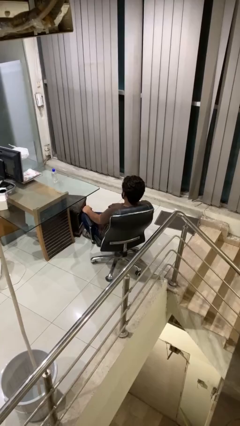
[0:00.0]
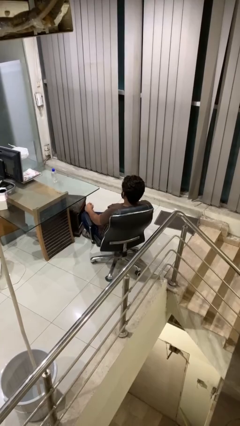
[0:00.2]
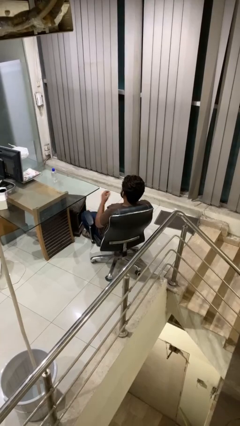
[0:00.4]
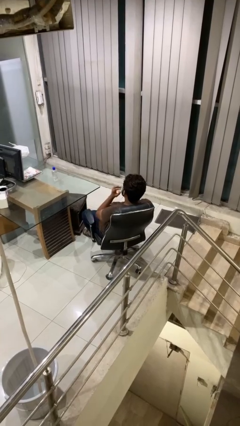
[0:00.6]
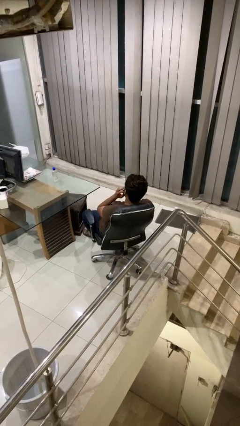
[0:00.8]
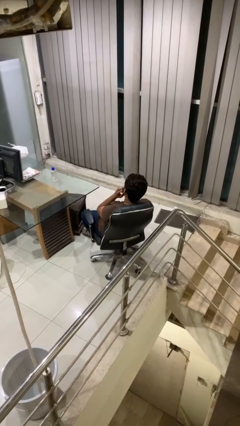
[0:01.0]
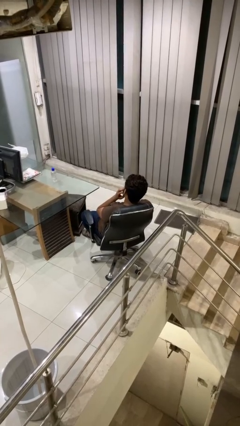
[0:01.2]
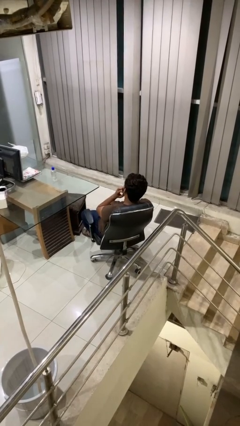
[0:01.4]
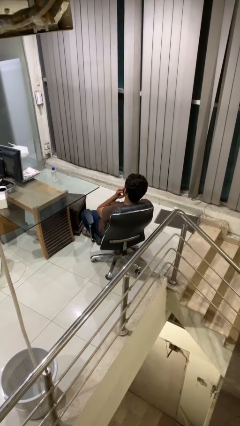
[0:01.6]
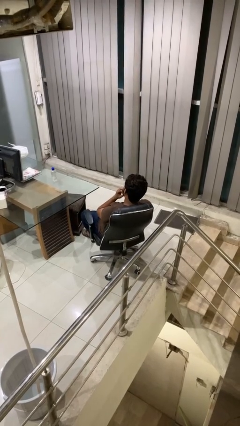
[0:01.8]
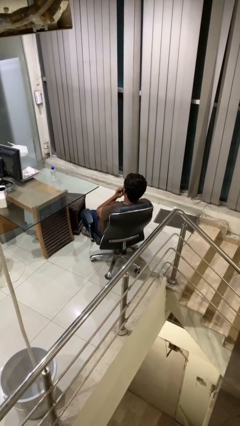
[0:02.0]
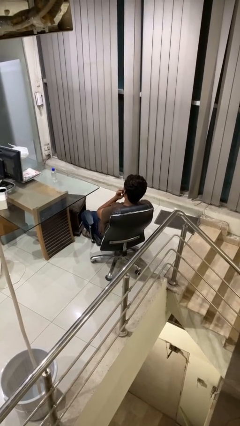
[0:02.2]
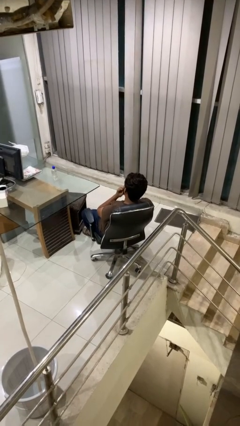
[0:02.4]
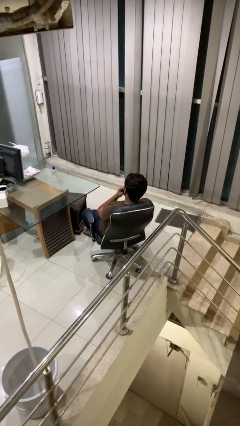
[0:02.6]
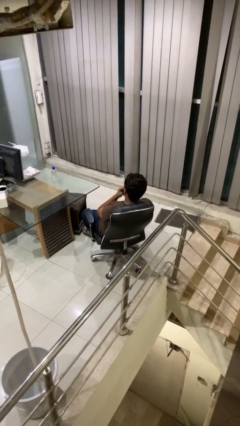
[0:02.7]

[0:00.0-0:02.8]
person strokes chin

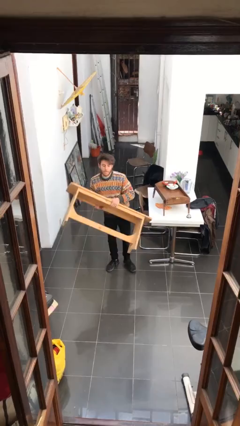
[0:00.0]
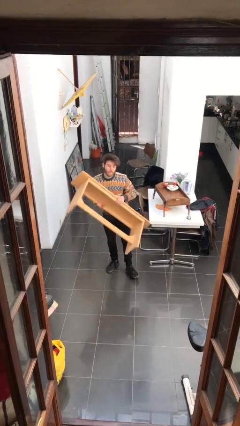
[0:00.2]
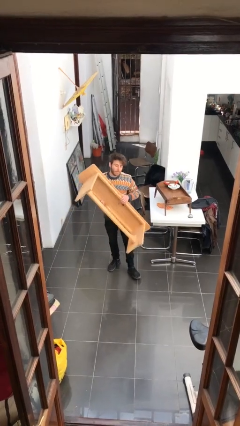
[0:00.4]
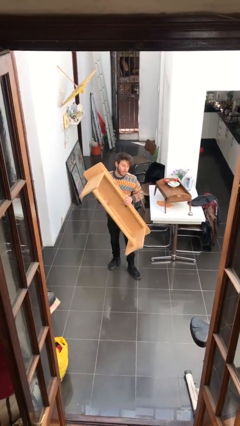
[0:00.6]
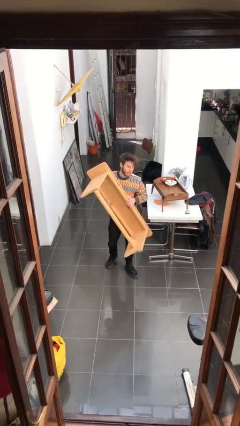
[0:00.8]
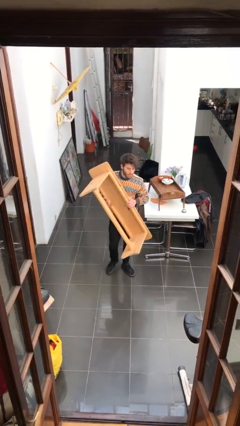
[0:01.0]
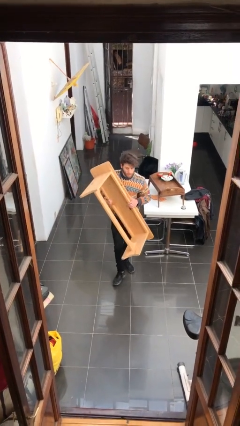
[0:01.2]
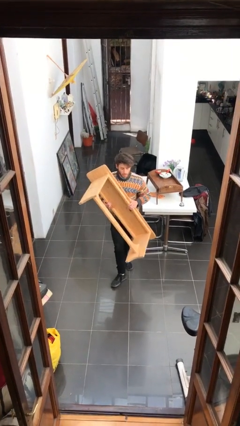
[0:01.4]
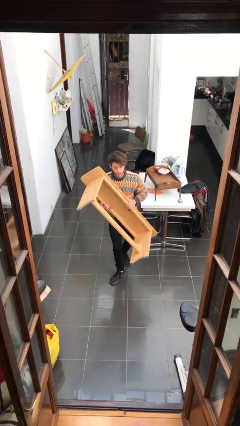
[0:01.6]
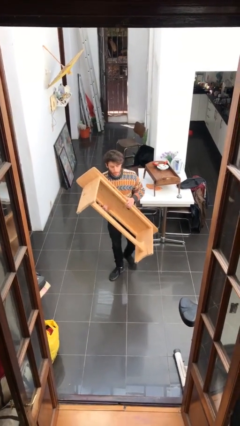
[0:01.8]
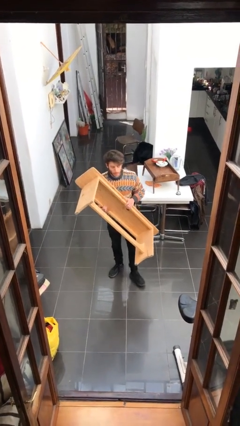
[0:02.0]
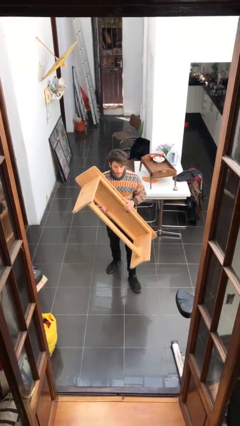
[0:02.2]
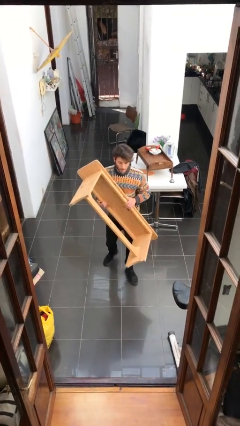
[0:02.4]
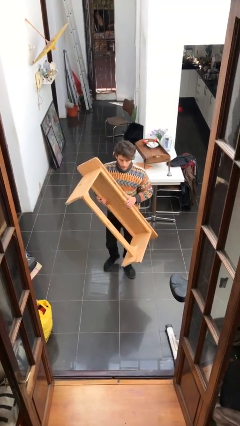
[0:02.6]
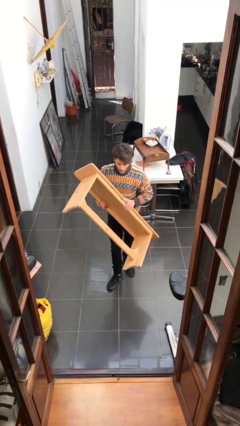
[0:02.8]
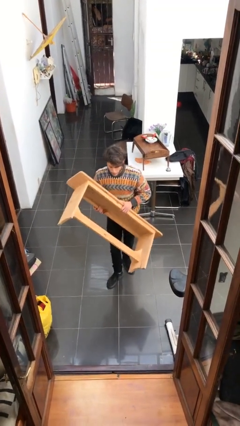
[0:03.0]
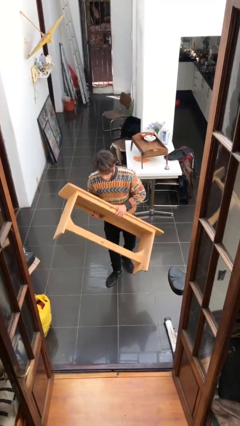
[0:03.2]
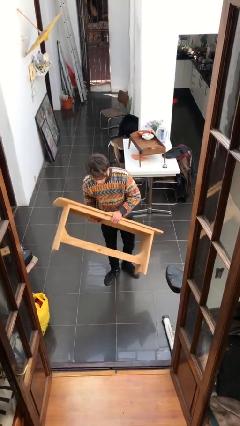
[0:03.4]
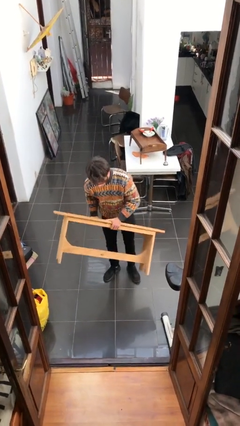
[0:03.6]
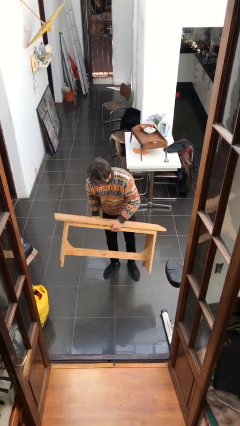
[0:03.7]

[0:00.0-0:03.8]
person carries heavy object

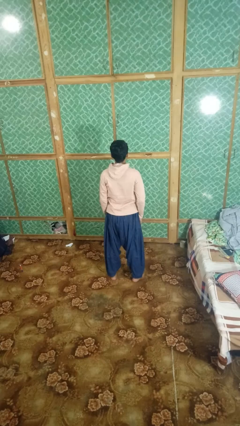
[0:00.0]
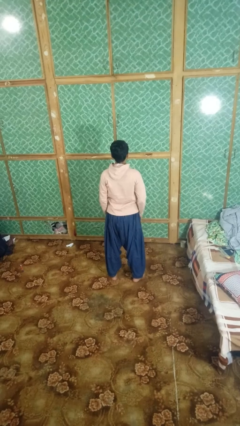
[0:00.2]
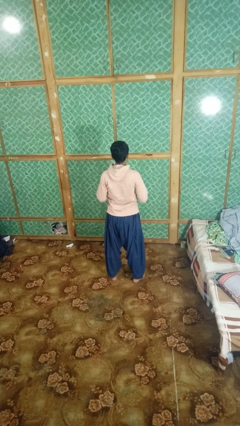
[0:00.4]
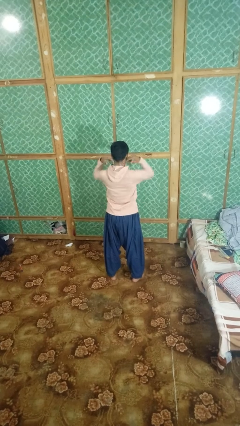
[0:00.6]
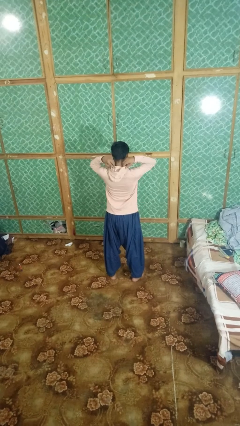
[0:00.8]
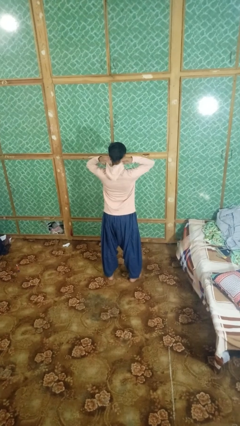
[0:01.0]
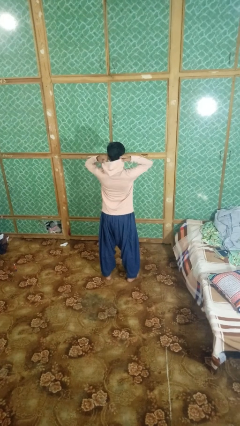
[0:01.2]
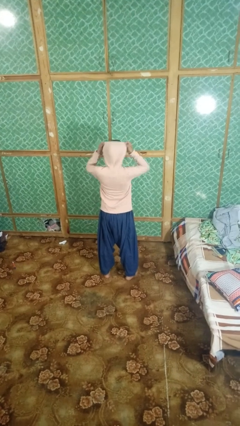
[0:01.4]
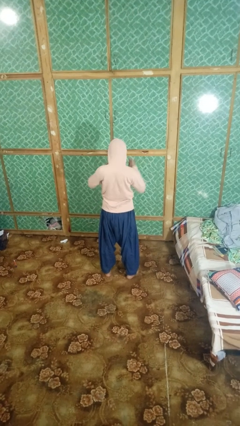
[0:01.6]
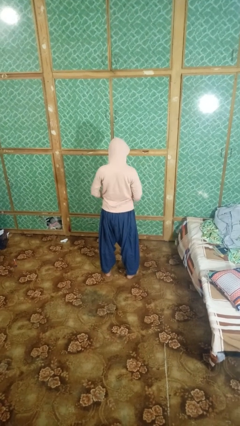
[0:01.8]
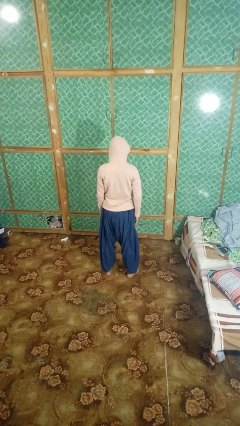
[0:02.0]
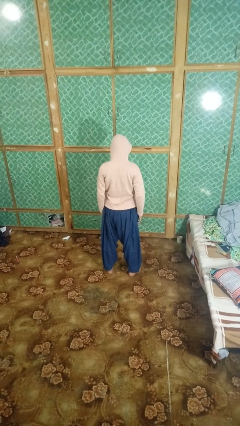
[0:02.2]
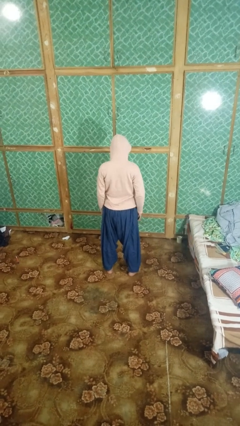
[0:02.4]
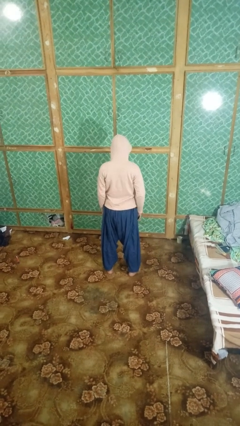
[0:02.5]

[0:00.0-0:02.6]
person puts on hoodie

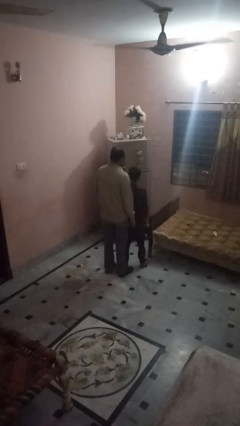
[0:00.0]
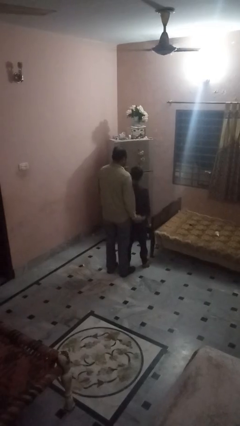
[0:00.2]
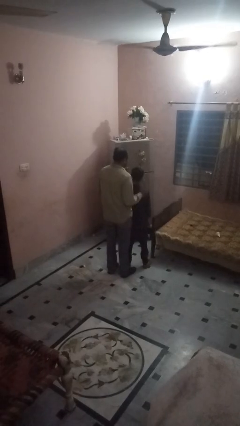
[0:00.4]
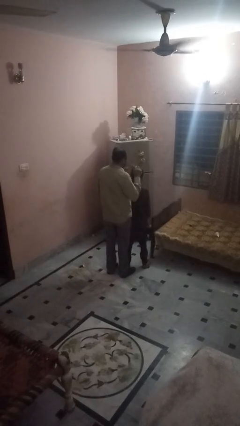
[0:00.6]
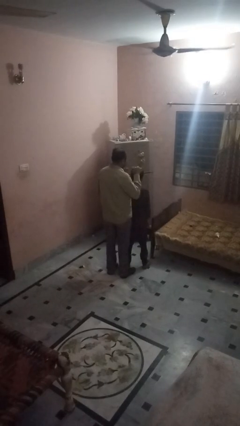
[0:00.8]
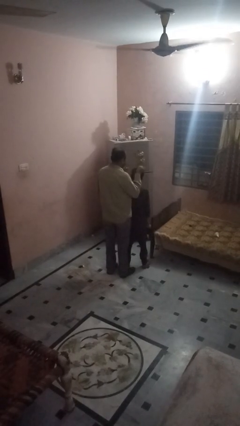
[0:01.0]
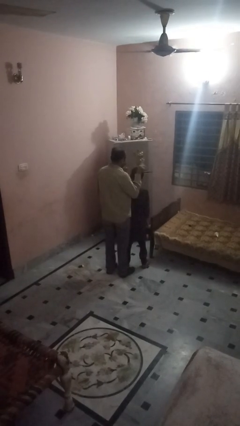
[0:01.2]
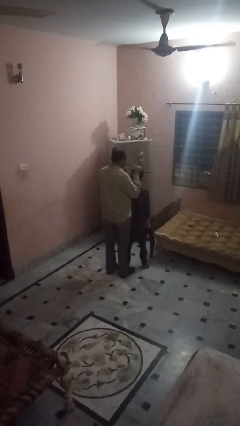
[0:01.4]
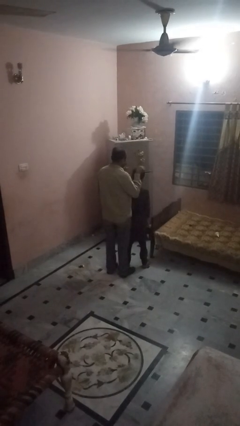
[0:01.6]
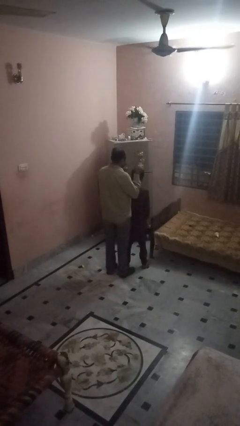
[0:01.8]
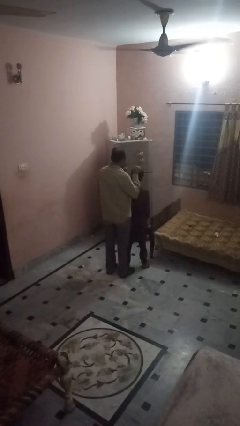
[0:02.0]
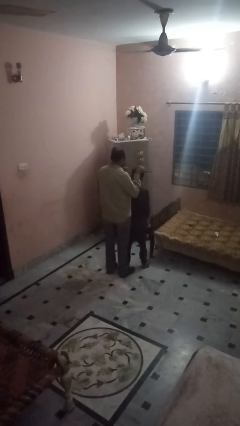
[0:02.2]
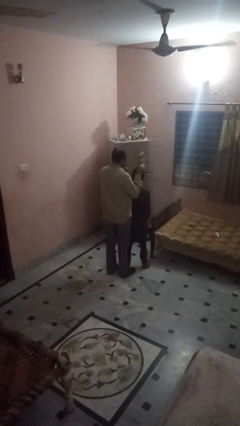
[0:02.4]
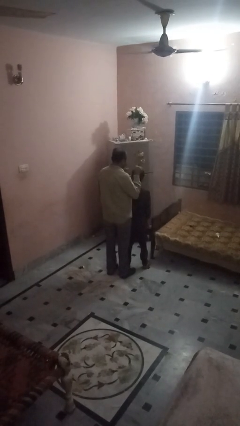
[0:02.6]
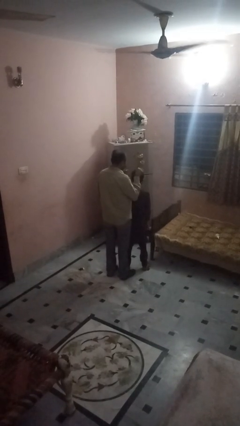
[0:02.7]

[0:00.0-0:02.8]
person brushes hair of person

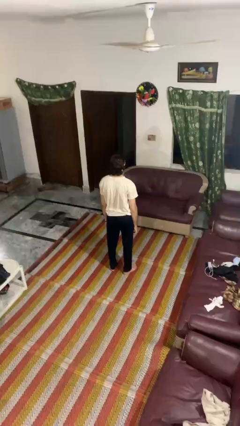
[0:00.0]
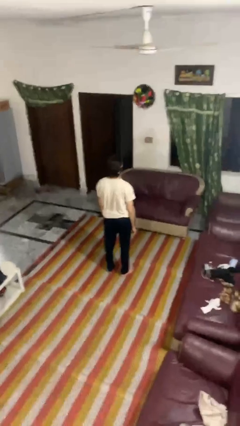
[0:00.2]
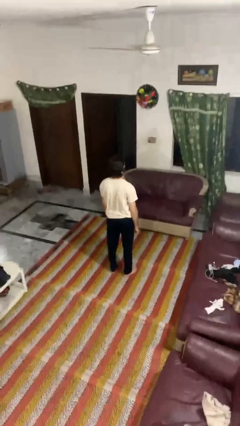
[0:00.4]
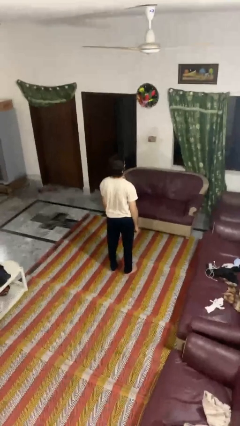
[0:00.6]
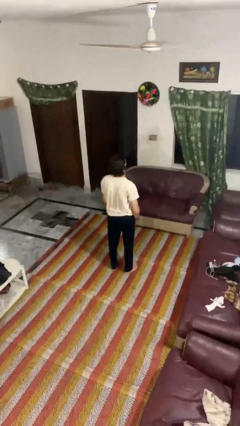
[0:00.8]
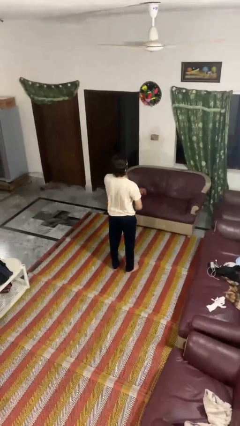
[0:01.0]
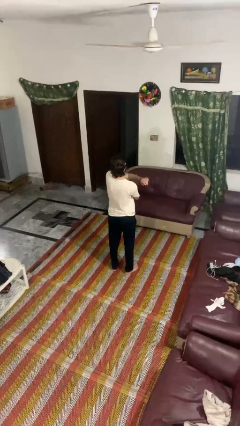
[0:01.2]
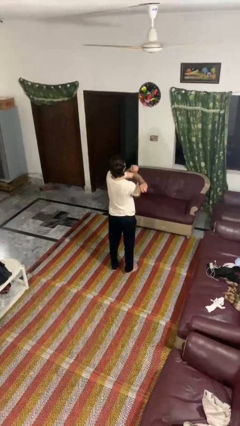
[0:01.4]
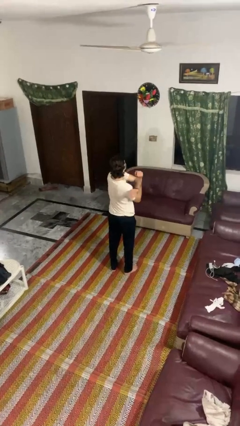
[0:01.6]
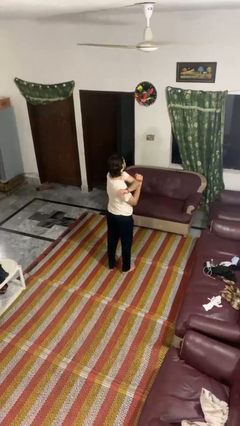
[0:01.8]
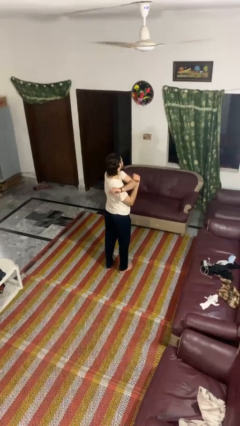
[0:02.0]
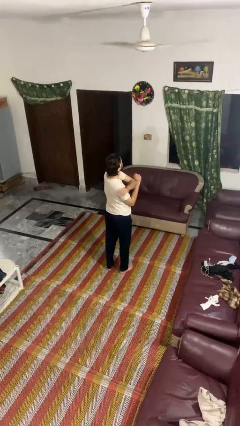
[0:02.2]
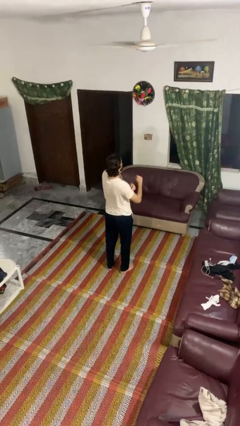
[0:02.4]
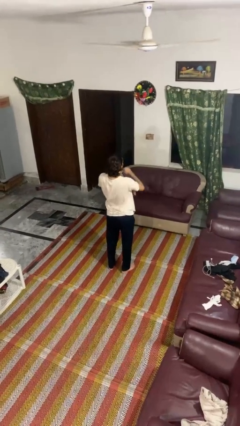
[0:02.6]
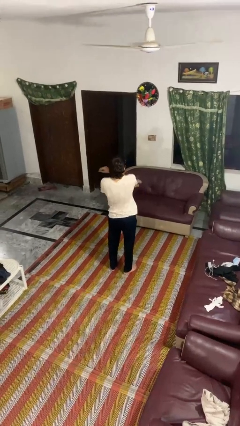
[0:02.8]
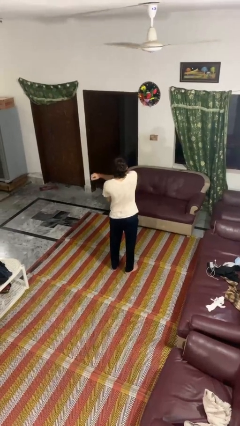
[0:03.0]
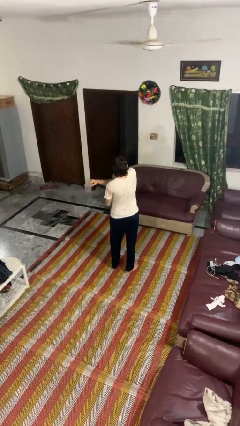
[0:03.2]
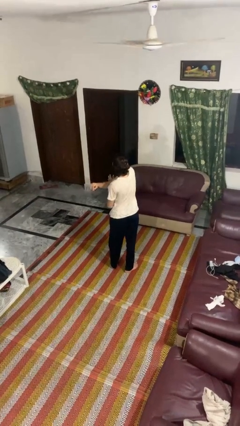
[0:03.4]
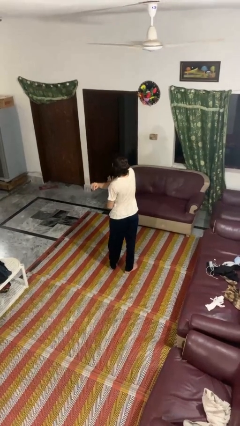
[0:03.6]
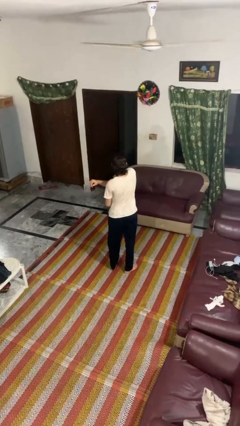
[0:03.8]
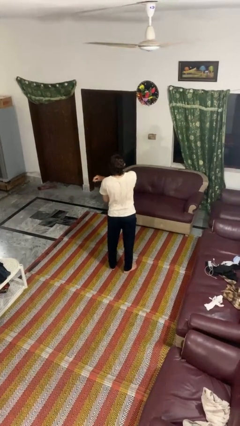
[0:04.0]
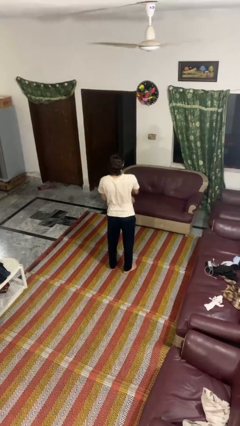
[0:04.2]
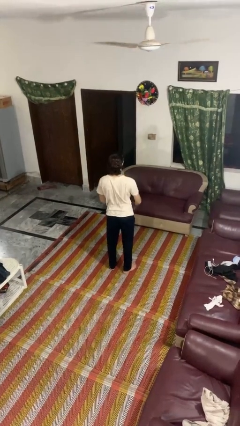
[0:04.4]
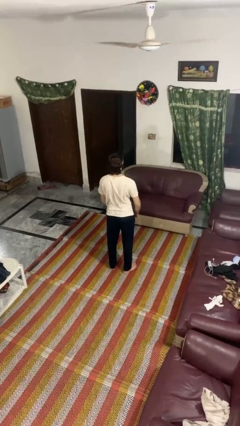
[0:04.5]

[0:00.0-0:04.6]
person stretches arms to side

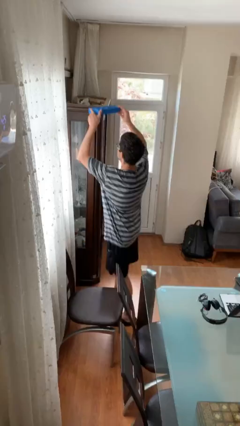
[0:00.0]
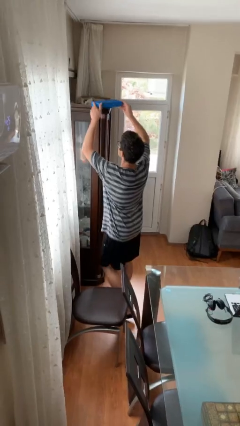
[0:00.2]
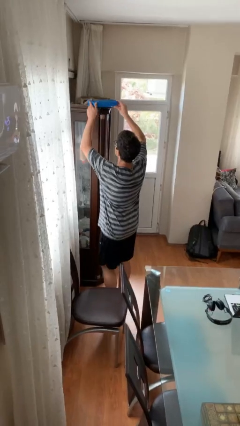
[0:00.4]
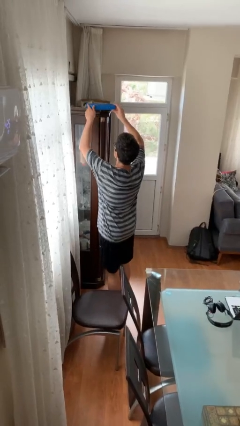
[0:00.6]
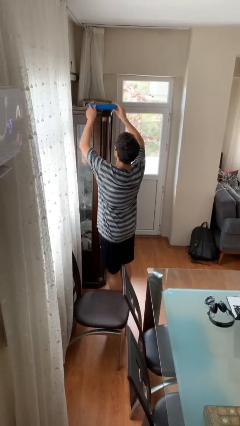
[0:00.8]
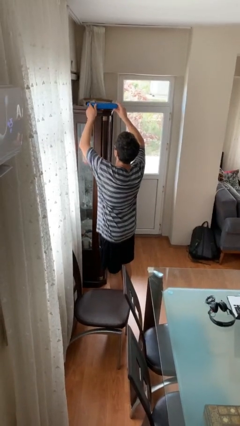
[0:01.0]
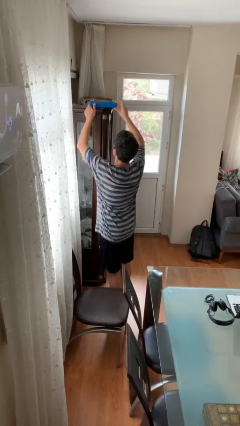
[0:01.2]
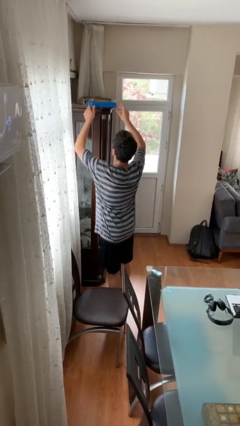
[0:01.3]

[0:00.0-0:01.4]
person puts down object on shelf
